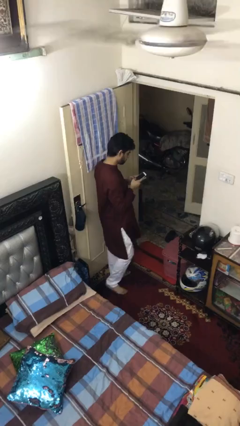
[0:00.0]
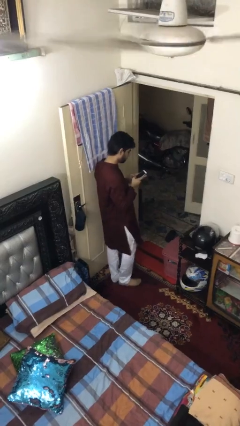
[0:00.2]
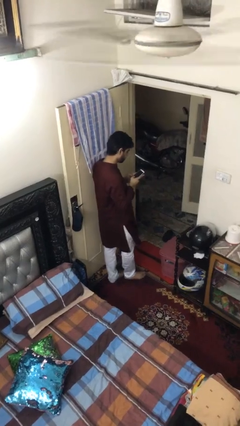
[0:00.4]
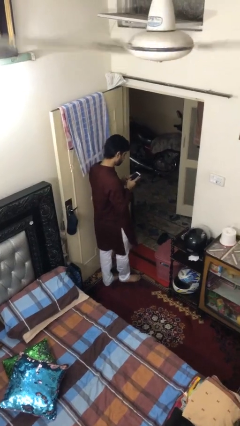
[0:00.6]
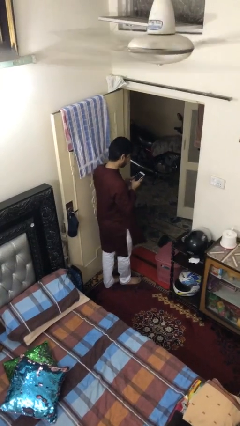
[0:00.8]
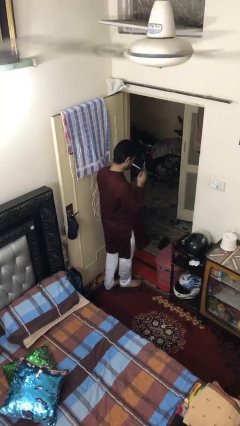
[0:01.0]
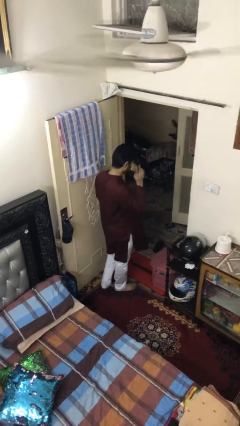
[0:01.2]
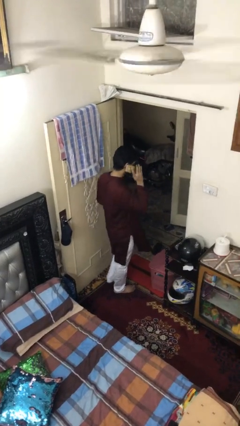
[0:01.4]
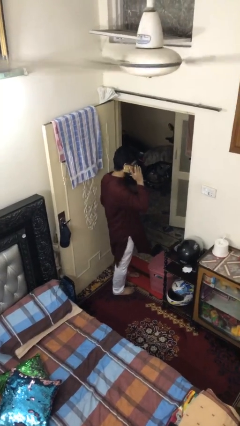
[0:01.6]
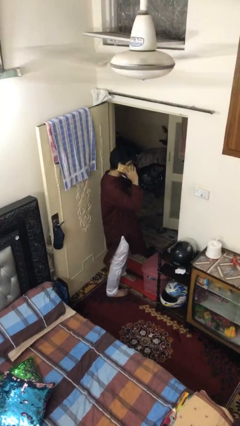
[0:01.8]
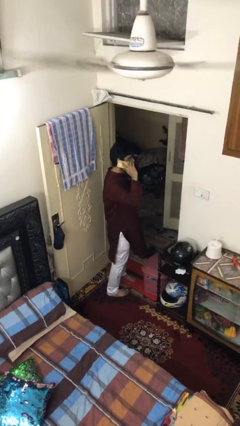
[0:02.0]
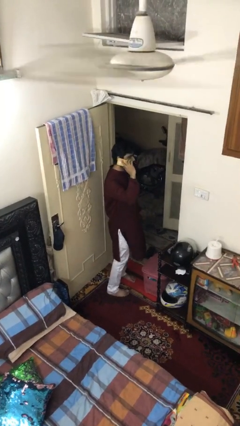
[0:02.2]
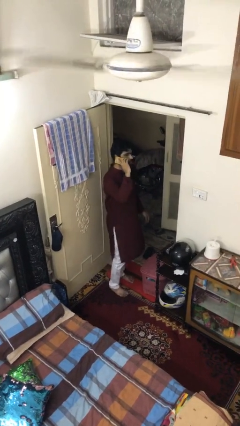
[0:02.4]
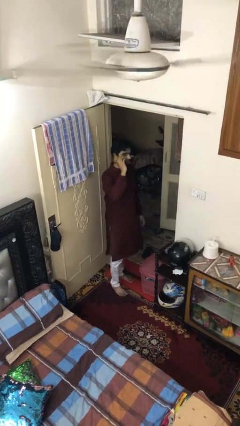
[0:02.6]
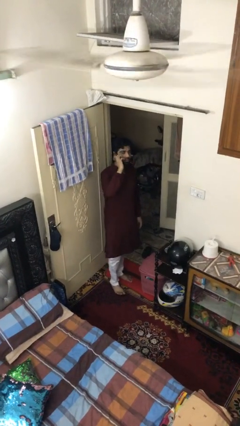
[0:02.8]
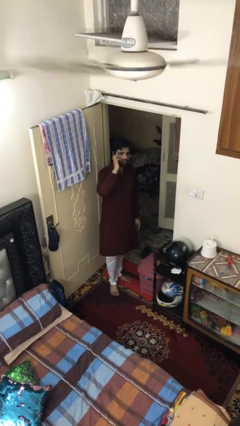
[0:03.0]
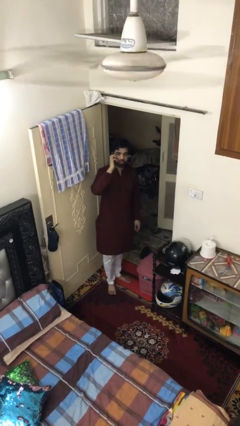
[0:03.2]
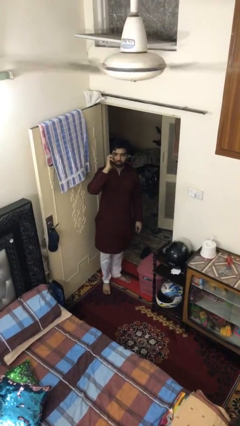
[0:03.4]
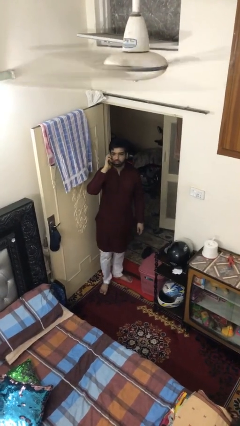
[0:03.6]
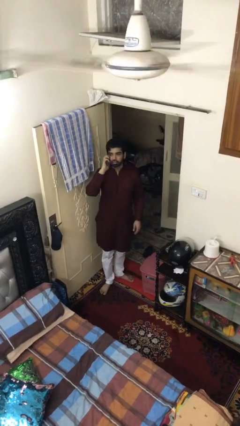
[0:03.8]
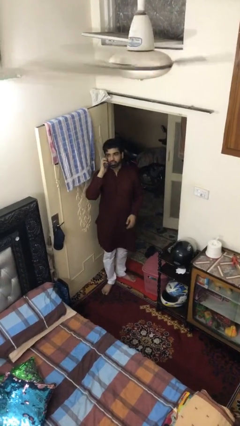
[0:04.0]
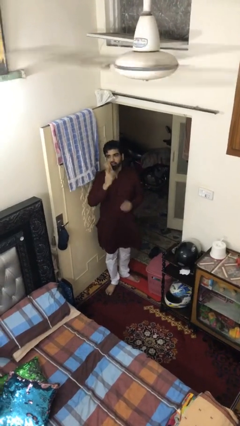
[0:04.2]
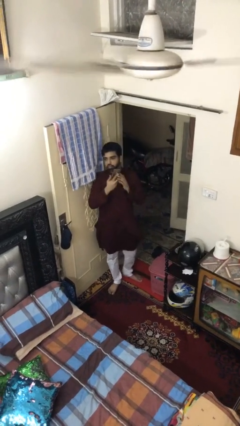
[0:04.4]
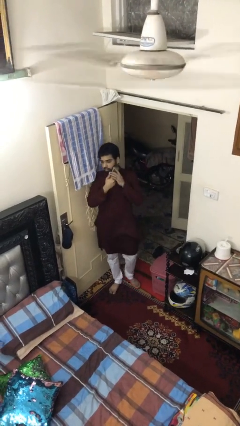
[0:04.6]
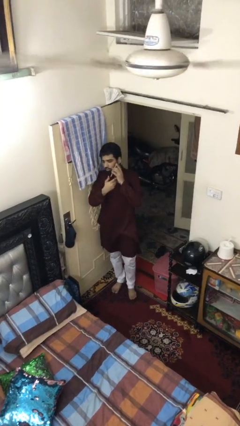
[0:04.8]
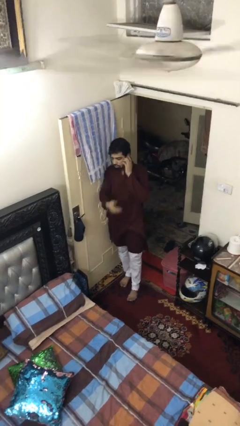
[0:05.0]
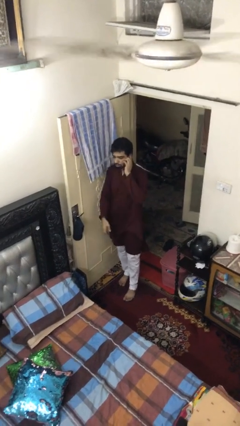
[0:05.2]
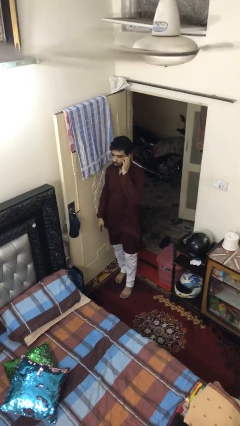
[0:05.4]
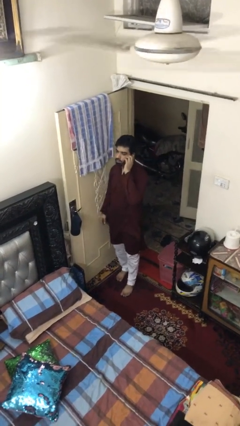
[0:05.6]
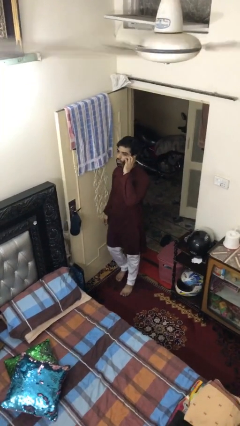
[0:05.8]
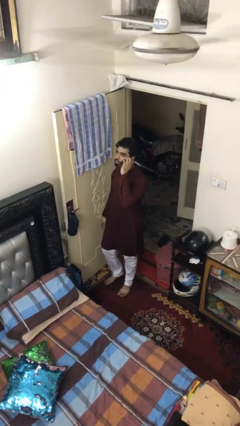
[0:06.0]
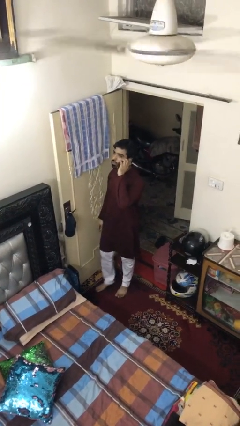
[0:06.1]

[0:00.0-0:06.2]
person talks on phone

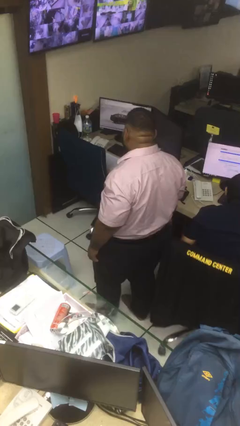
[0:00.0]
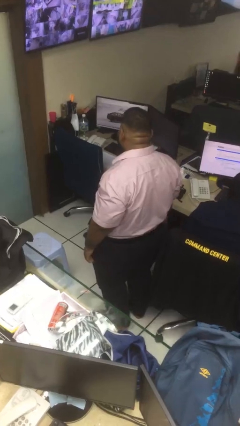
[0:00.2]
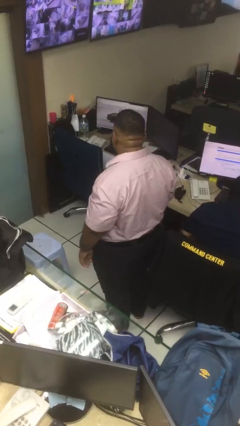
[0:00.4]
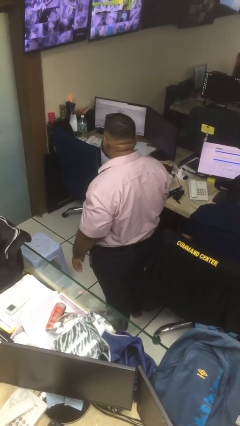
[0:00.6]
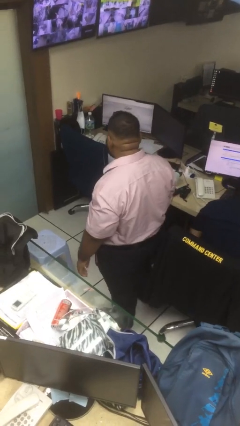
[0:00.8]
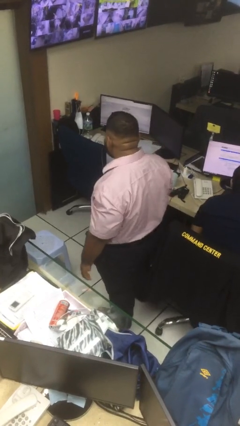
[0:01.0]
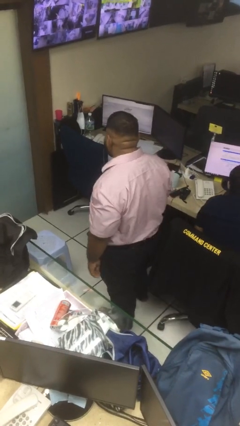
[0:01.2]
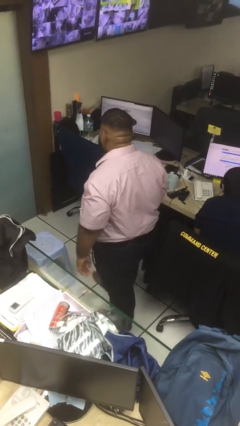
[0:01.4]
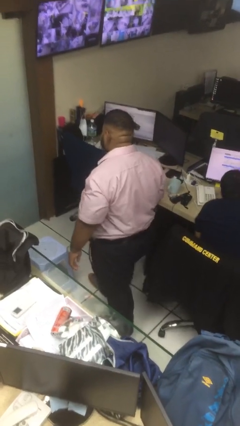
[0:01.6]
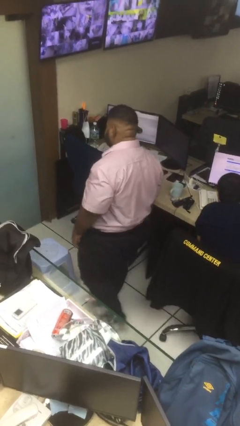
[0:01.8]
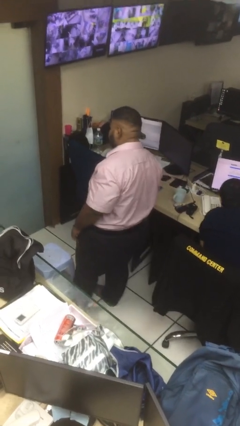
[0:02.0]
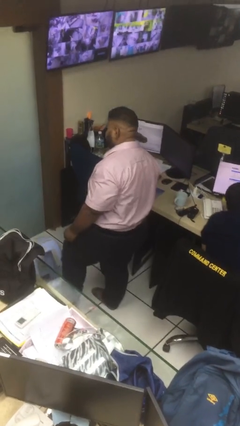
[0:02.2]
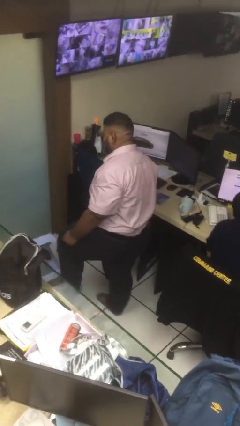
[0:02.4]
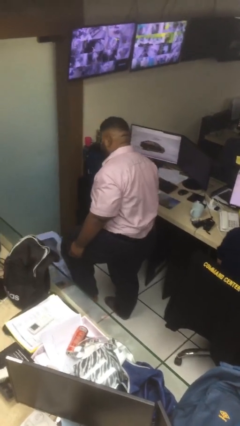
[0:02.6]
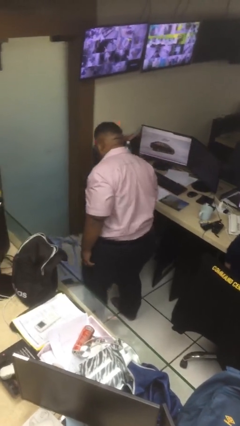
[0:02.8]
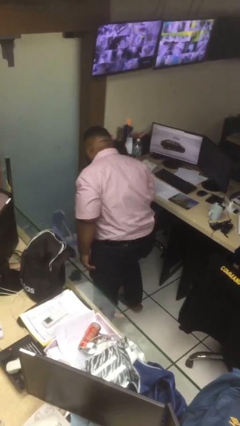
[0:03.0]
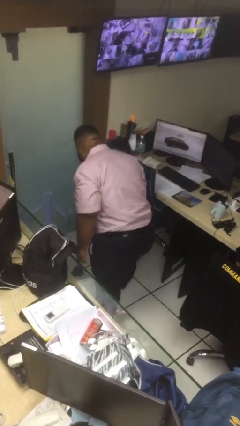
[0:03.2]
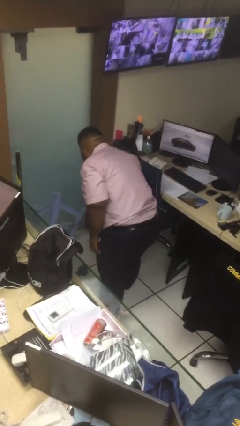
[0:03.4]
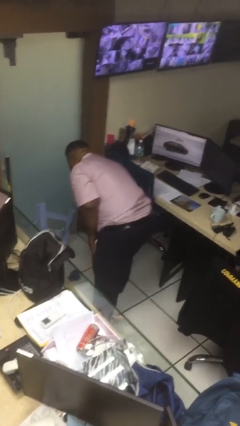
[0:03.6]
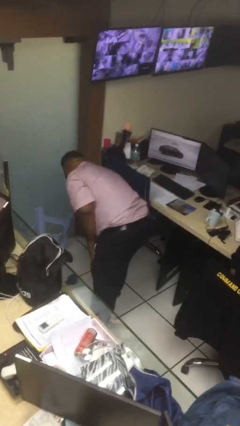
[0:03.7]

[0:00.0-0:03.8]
person knocks over furniture

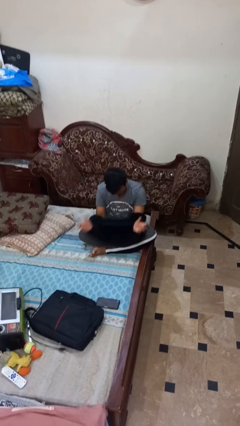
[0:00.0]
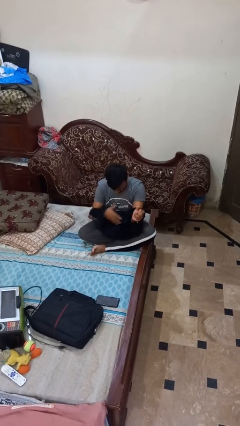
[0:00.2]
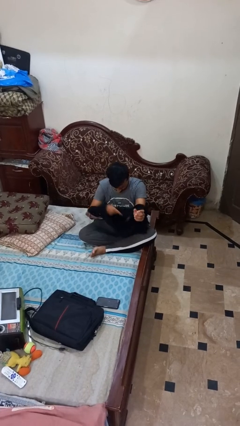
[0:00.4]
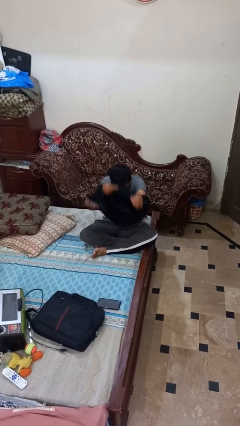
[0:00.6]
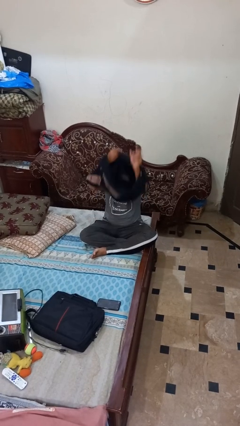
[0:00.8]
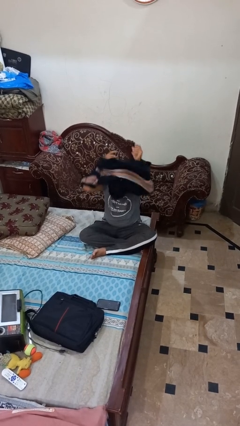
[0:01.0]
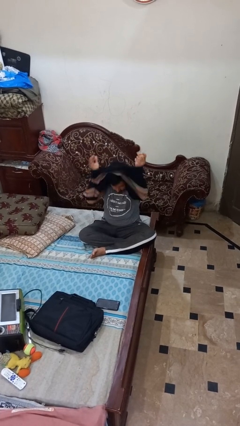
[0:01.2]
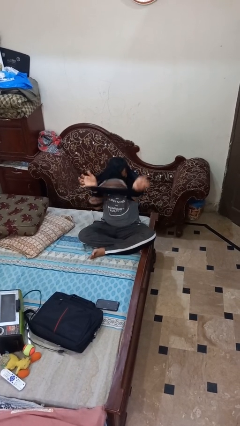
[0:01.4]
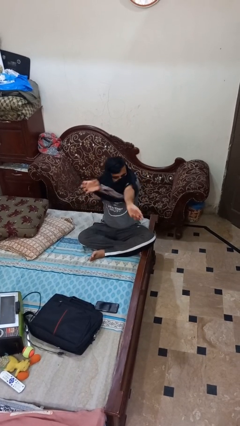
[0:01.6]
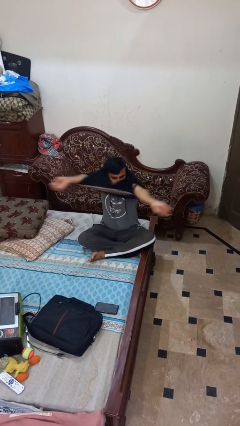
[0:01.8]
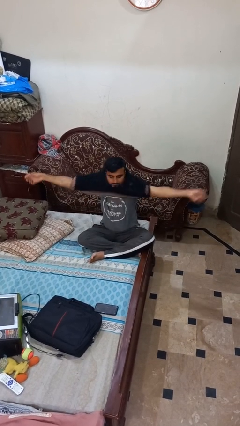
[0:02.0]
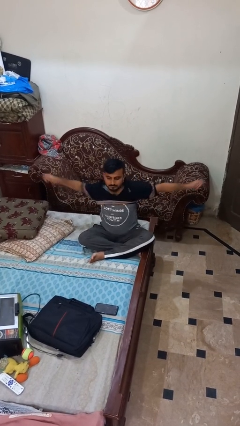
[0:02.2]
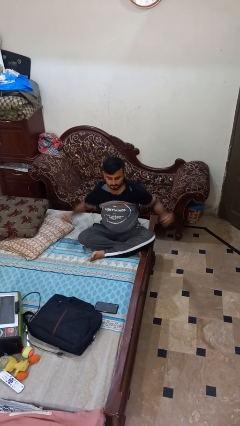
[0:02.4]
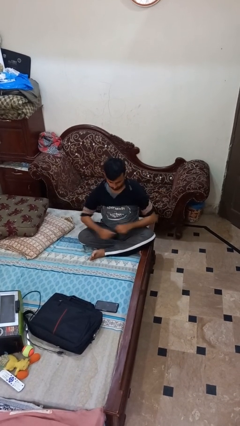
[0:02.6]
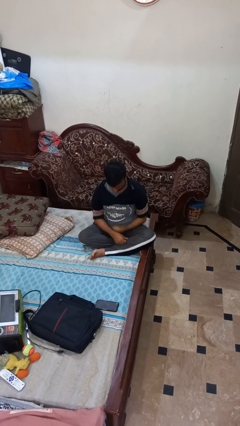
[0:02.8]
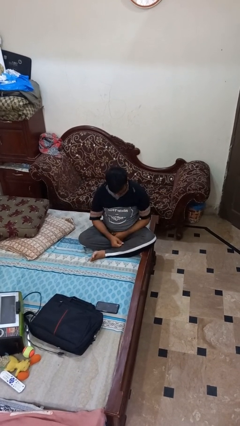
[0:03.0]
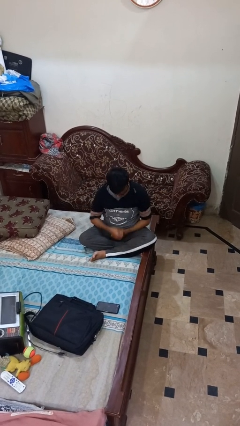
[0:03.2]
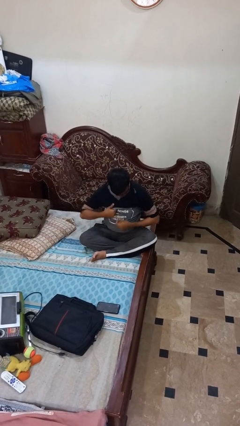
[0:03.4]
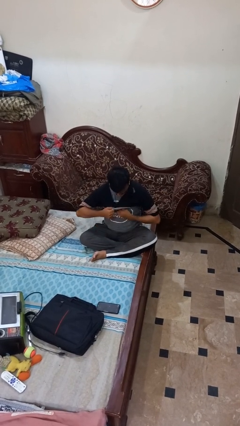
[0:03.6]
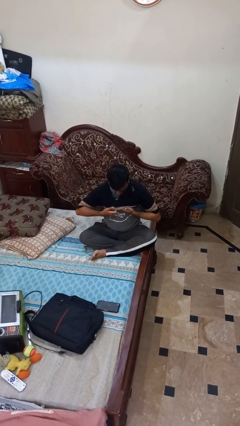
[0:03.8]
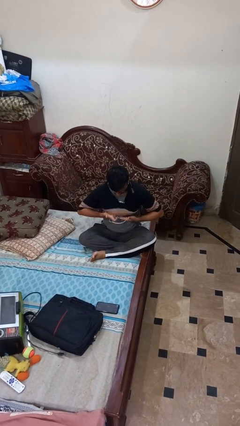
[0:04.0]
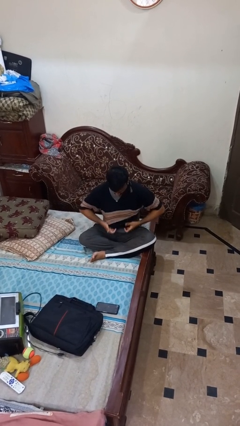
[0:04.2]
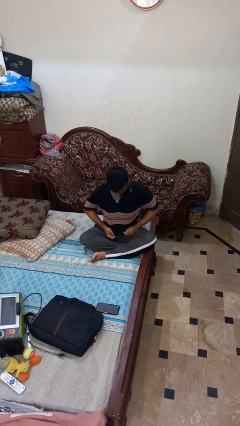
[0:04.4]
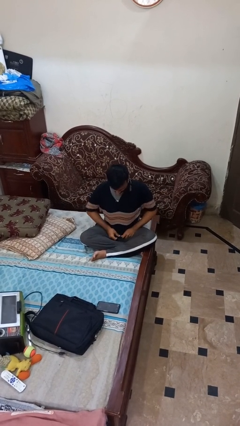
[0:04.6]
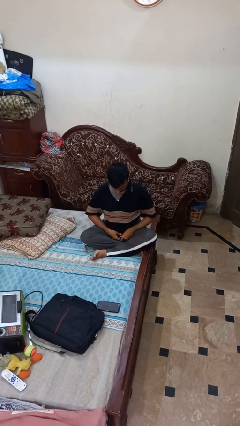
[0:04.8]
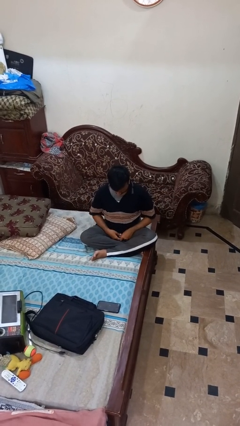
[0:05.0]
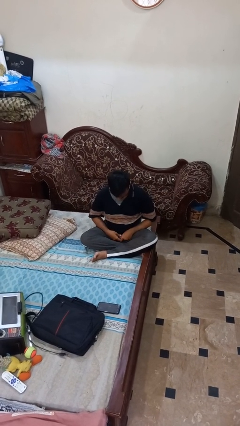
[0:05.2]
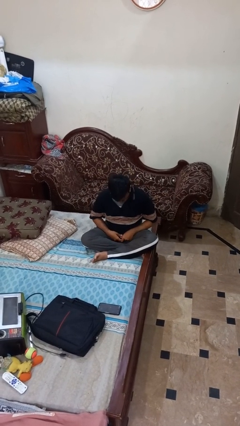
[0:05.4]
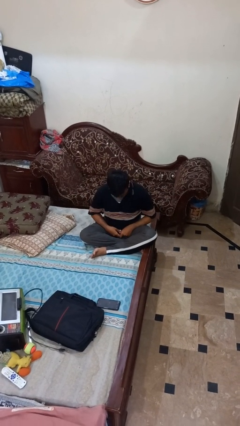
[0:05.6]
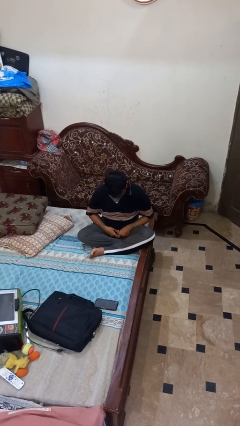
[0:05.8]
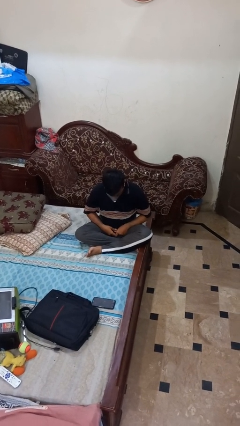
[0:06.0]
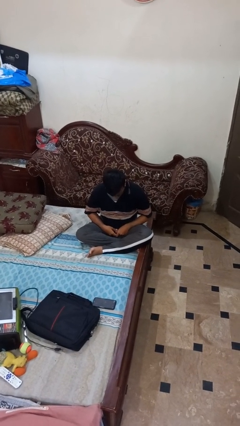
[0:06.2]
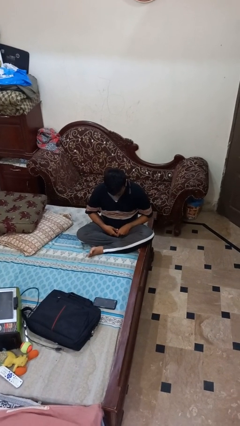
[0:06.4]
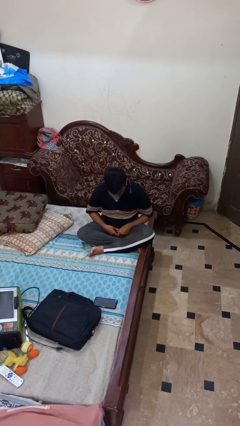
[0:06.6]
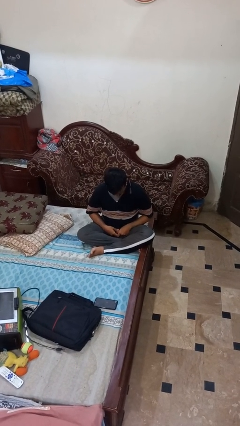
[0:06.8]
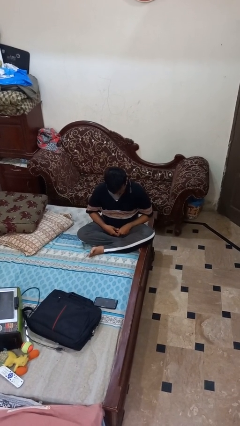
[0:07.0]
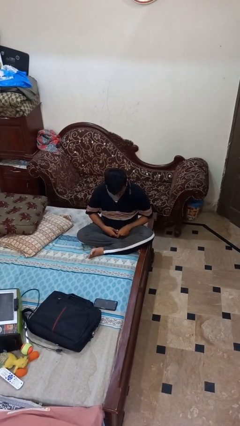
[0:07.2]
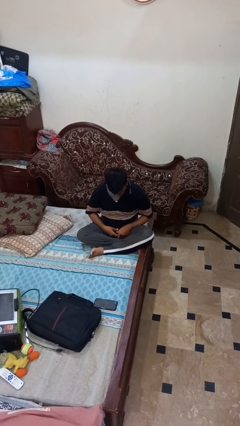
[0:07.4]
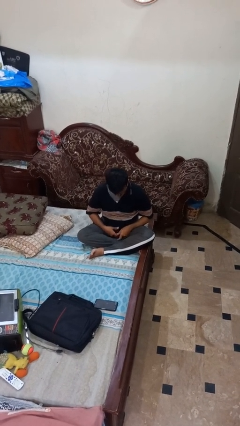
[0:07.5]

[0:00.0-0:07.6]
person puts on shirt

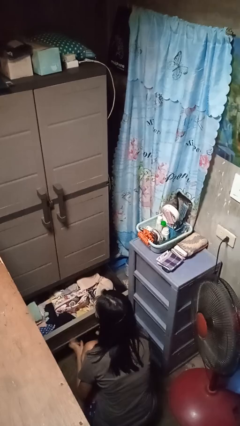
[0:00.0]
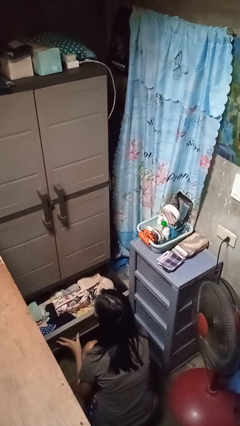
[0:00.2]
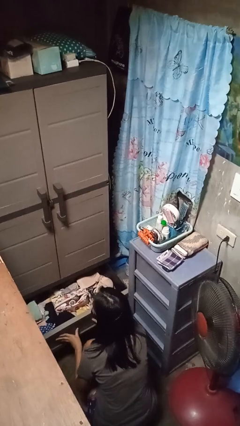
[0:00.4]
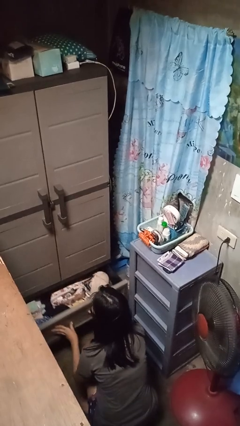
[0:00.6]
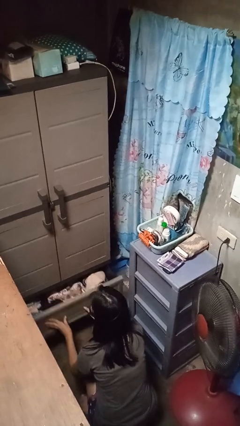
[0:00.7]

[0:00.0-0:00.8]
person closes dresser drawer
